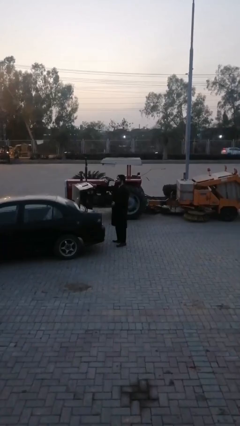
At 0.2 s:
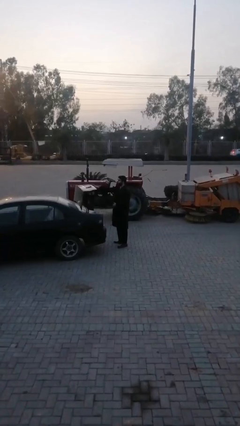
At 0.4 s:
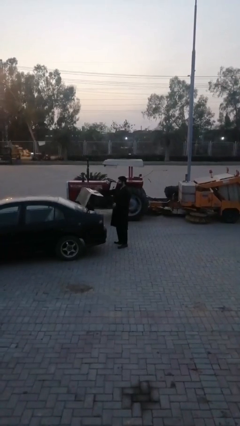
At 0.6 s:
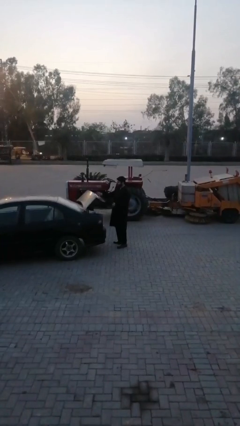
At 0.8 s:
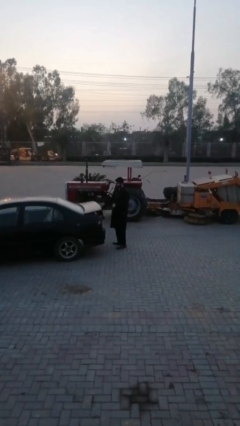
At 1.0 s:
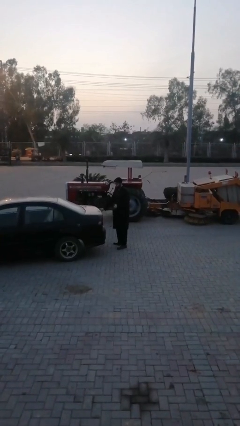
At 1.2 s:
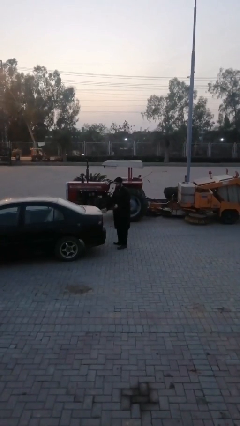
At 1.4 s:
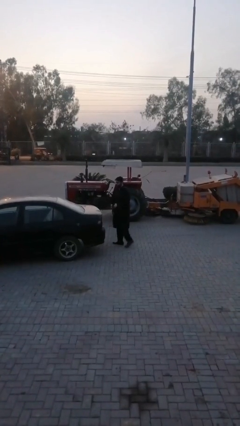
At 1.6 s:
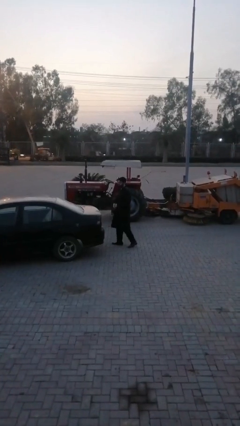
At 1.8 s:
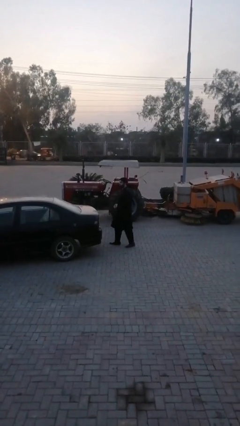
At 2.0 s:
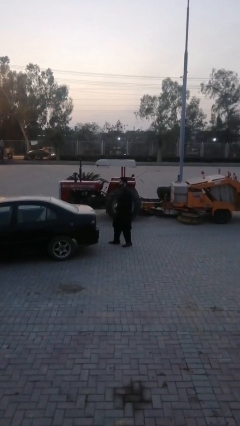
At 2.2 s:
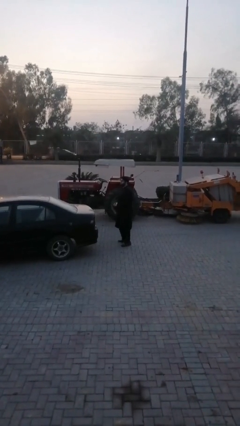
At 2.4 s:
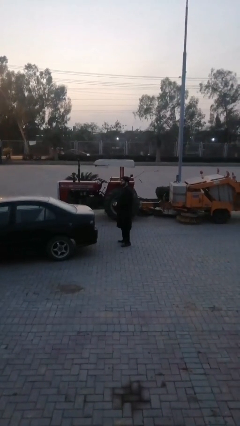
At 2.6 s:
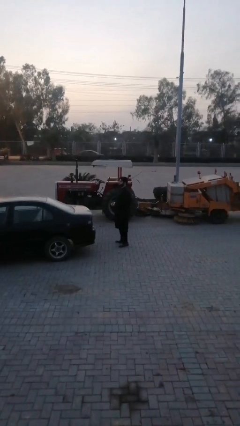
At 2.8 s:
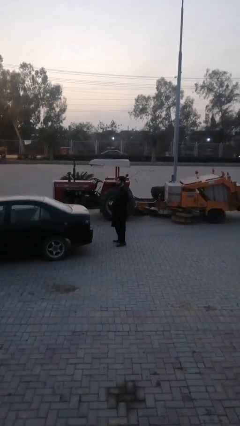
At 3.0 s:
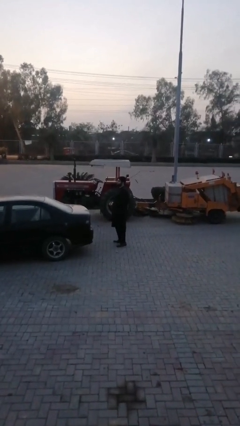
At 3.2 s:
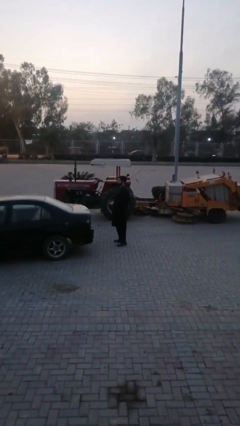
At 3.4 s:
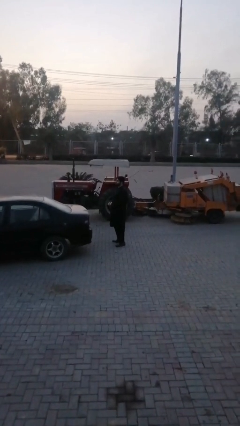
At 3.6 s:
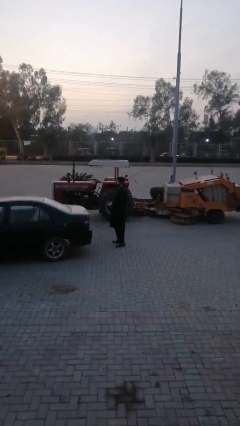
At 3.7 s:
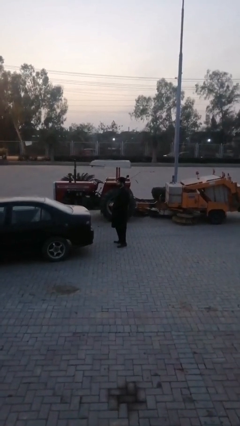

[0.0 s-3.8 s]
person closes car trunk

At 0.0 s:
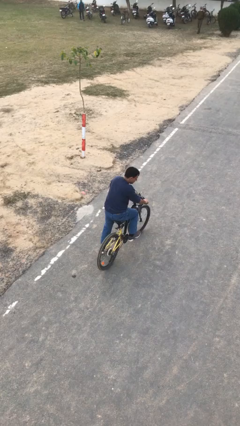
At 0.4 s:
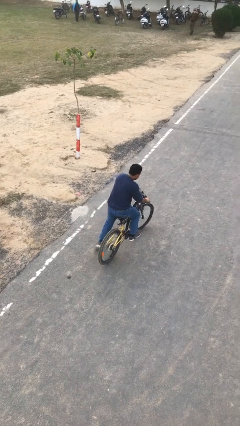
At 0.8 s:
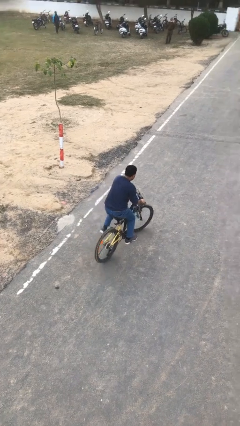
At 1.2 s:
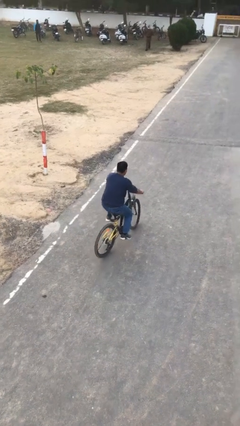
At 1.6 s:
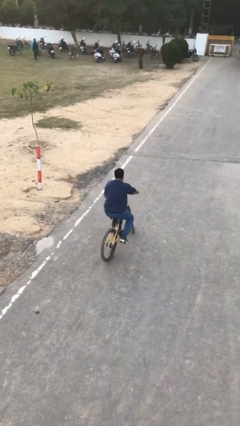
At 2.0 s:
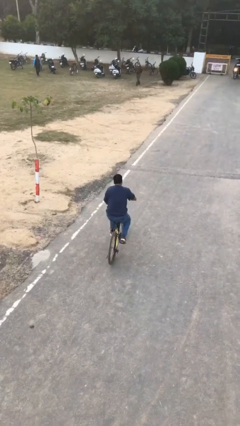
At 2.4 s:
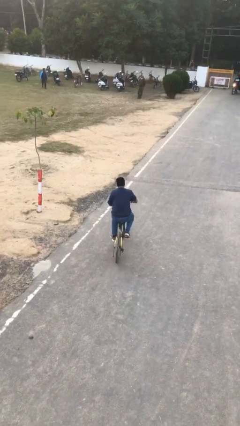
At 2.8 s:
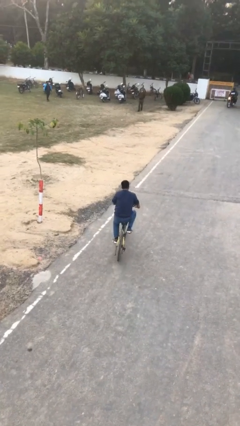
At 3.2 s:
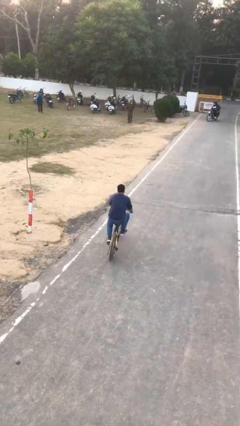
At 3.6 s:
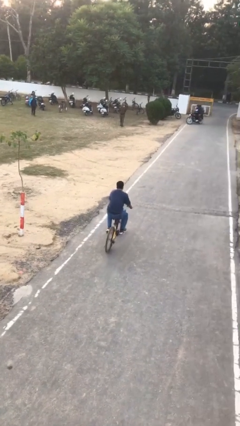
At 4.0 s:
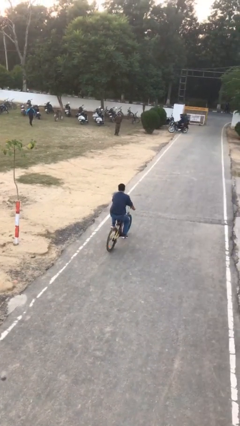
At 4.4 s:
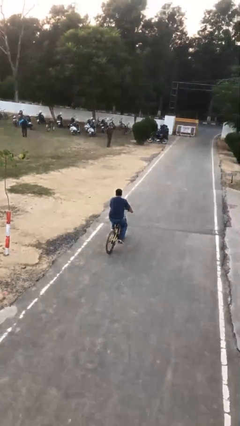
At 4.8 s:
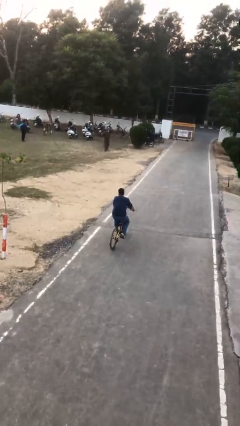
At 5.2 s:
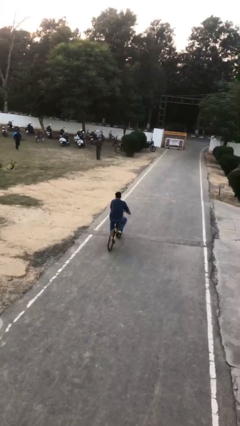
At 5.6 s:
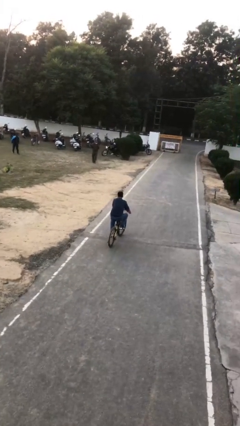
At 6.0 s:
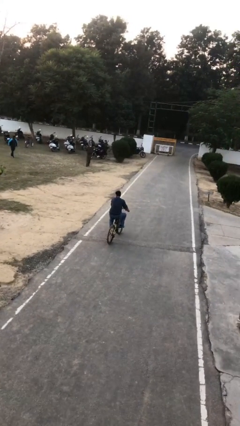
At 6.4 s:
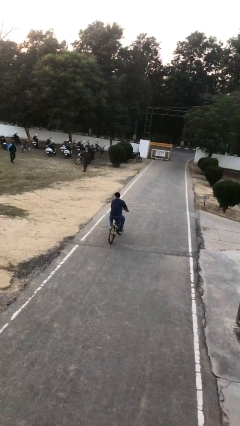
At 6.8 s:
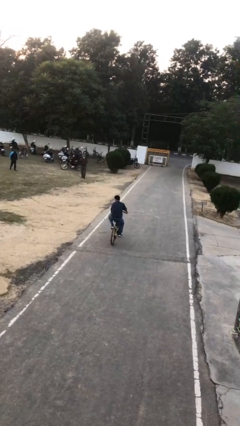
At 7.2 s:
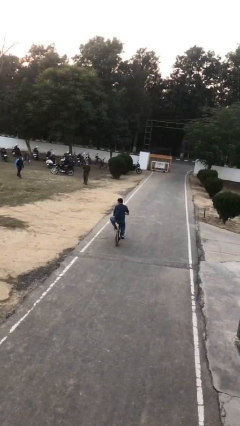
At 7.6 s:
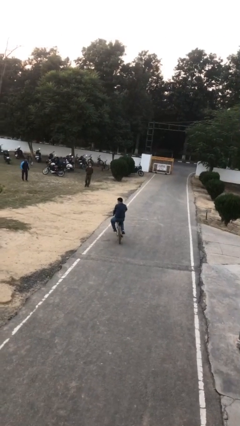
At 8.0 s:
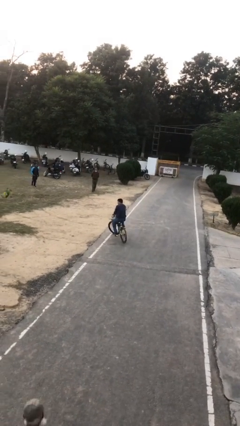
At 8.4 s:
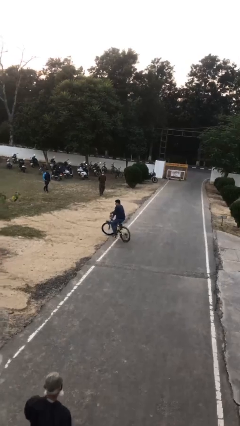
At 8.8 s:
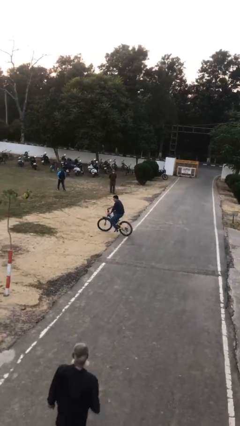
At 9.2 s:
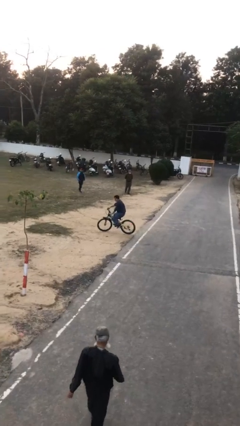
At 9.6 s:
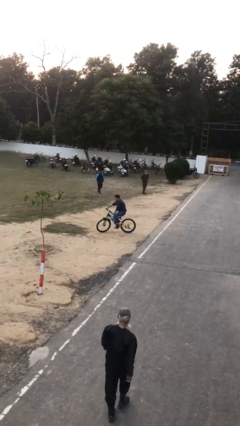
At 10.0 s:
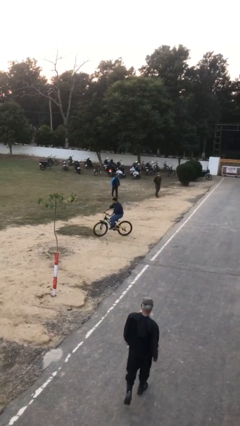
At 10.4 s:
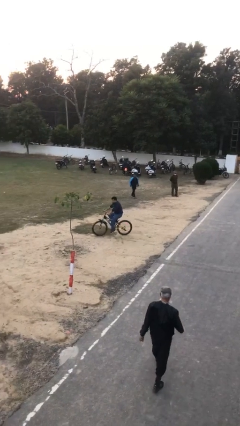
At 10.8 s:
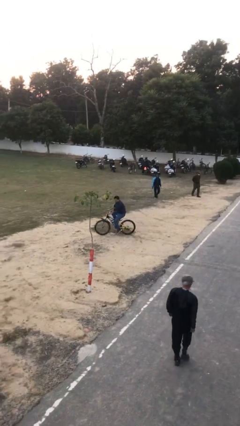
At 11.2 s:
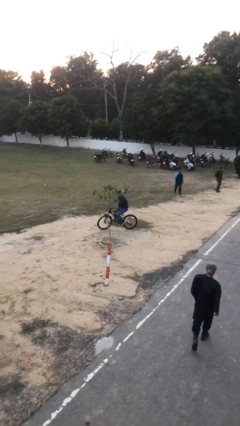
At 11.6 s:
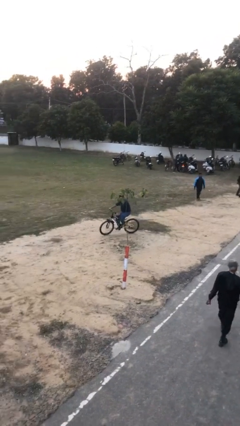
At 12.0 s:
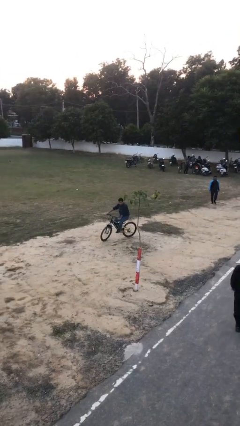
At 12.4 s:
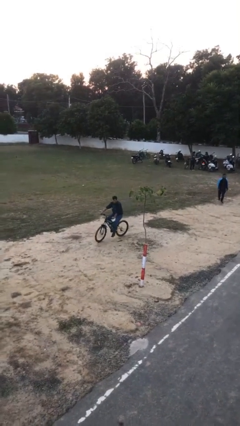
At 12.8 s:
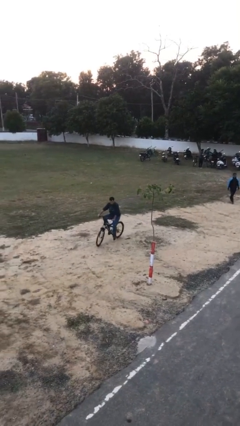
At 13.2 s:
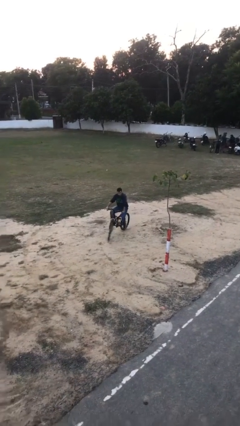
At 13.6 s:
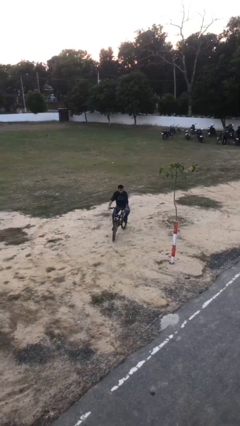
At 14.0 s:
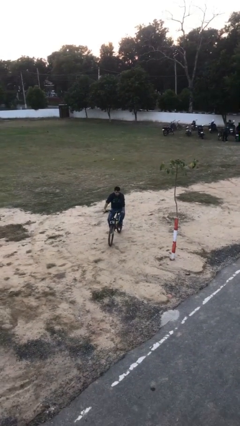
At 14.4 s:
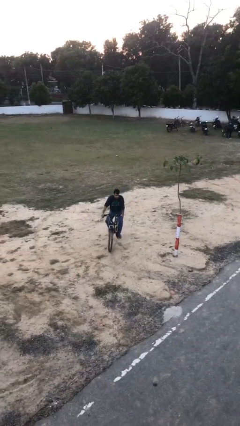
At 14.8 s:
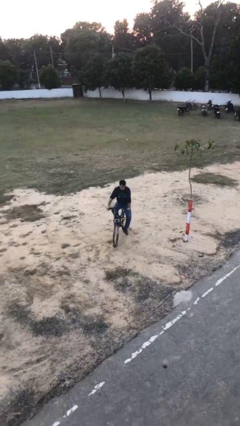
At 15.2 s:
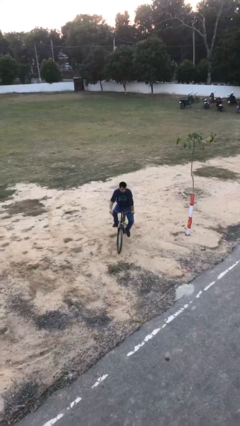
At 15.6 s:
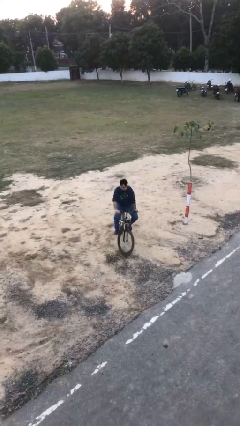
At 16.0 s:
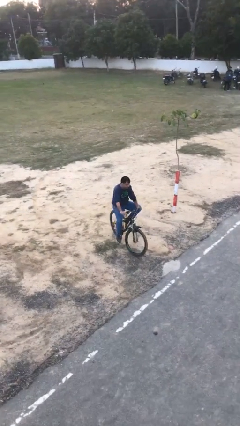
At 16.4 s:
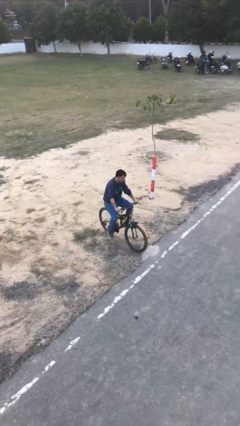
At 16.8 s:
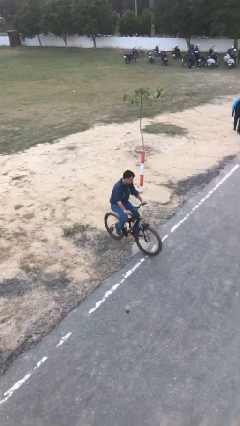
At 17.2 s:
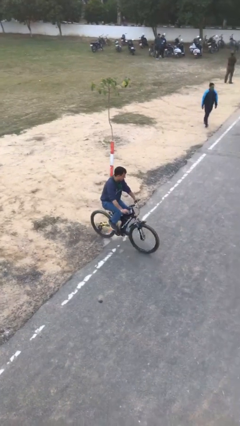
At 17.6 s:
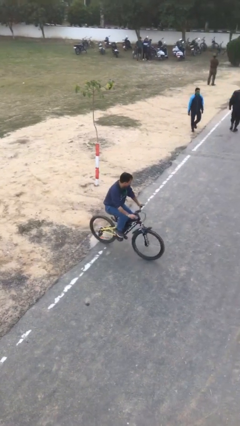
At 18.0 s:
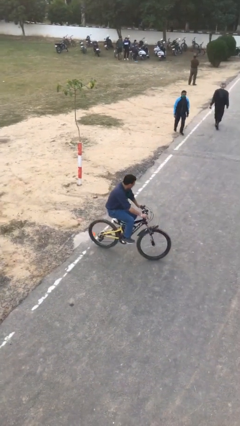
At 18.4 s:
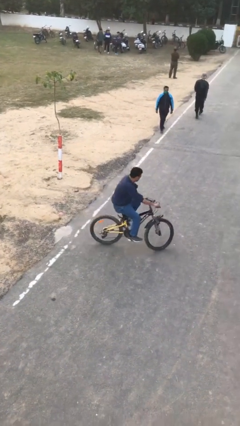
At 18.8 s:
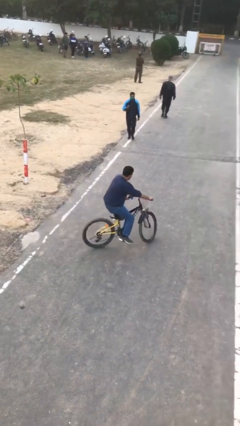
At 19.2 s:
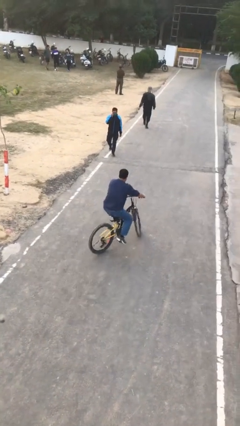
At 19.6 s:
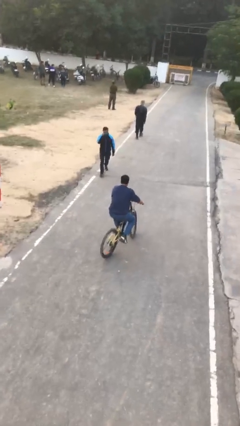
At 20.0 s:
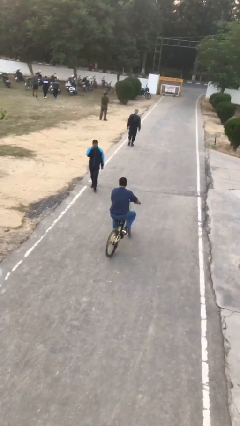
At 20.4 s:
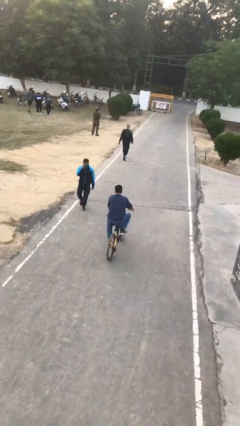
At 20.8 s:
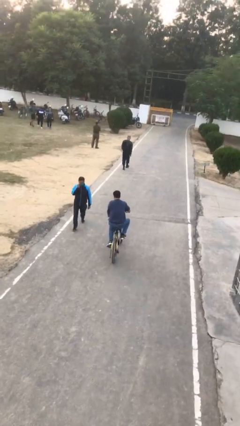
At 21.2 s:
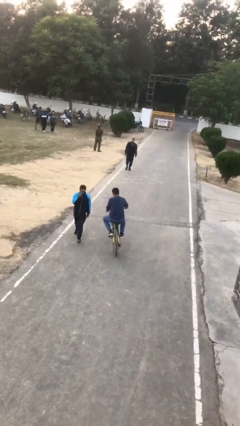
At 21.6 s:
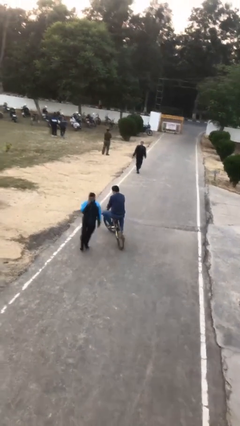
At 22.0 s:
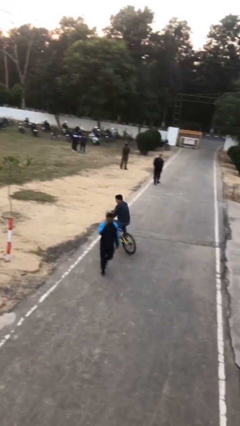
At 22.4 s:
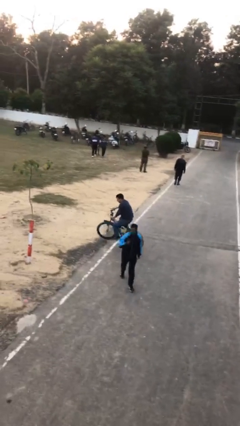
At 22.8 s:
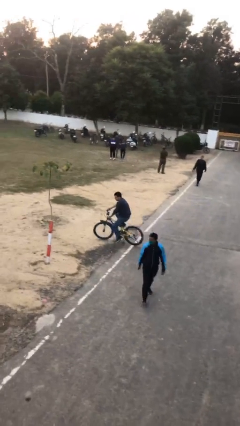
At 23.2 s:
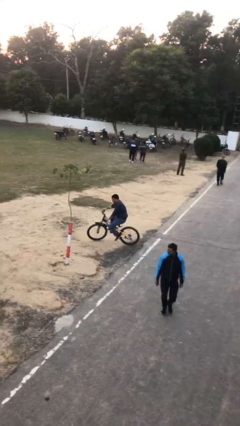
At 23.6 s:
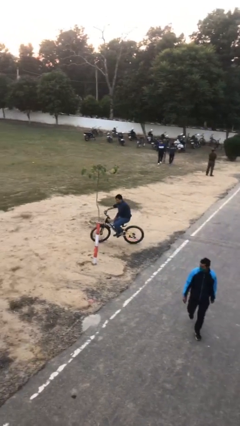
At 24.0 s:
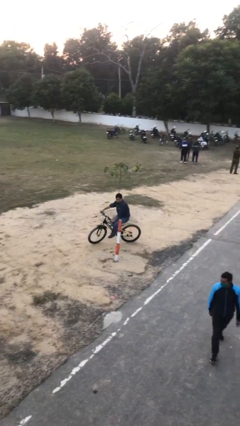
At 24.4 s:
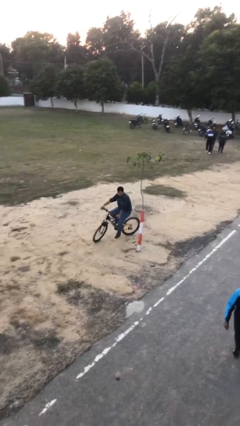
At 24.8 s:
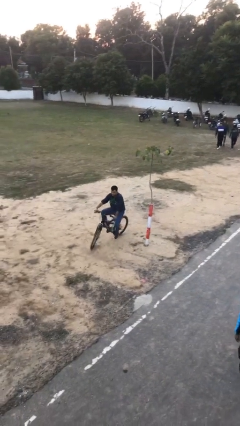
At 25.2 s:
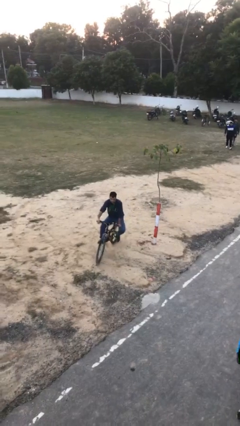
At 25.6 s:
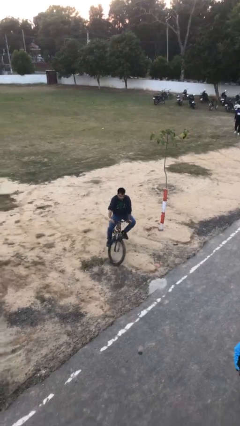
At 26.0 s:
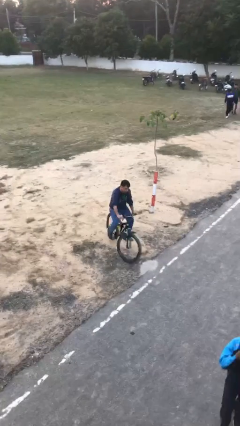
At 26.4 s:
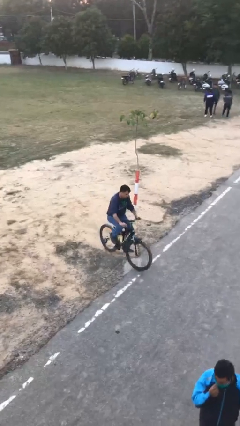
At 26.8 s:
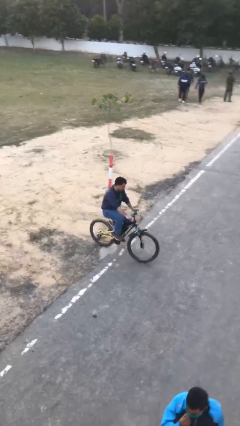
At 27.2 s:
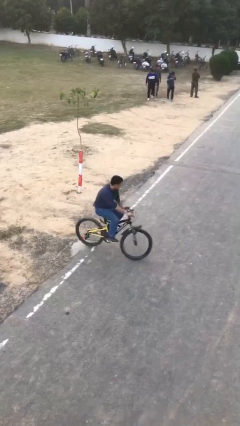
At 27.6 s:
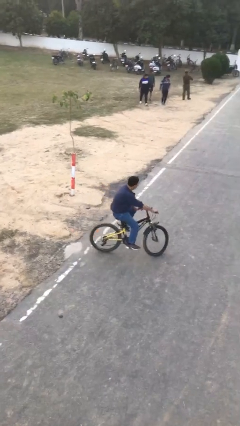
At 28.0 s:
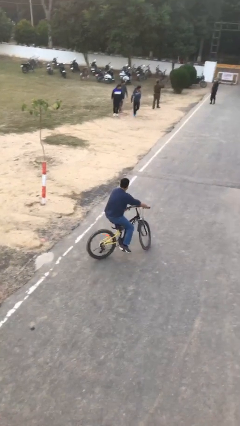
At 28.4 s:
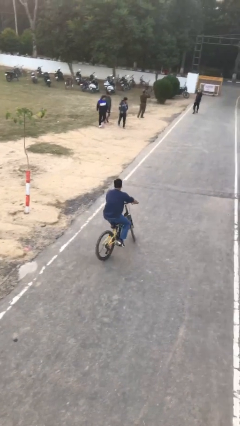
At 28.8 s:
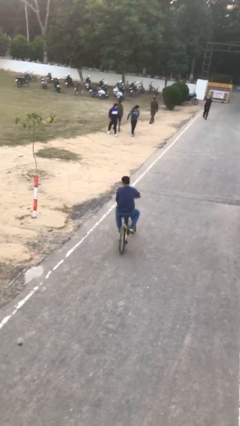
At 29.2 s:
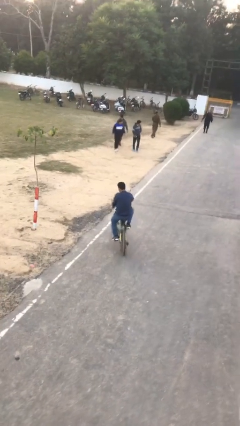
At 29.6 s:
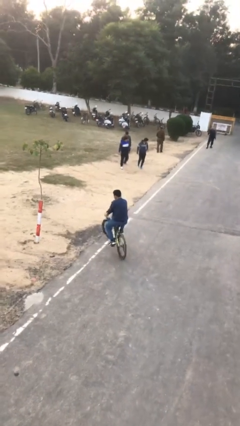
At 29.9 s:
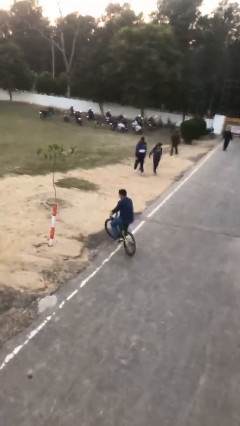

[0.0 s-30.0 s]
person rides bicycle
